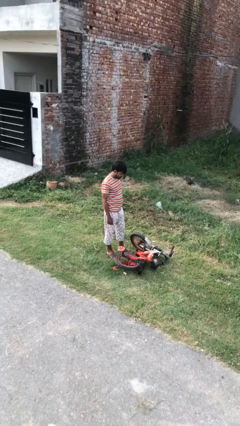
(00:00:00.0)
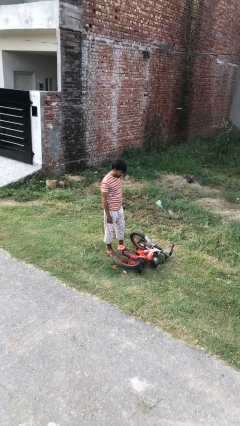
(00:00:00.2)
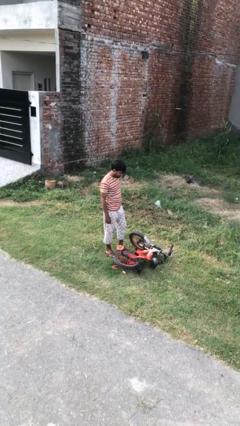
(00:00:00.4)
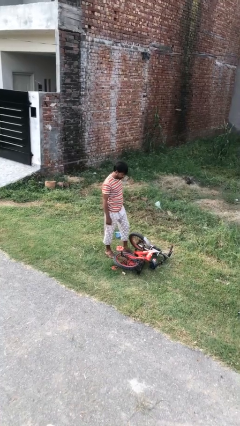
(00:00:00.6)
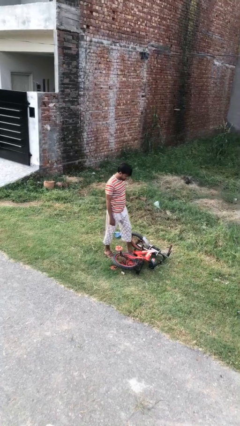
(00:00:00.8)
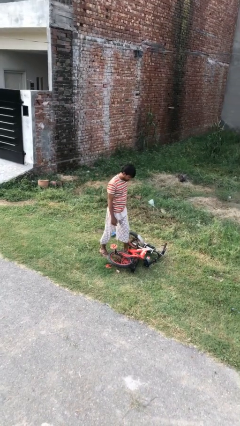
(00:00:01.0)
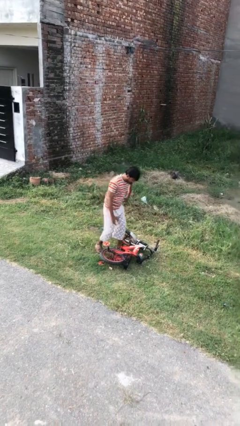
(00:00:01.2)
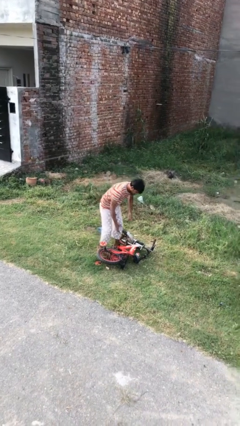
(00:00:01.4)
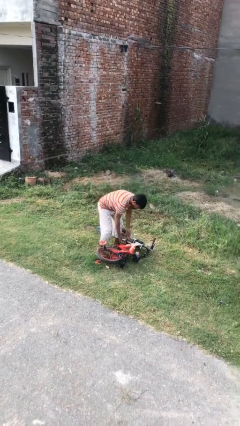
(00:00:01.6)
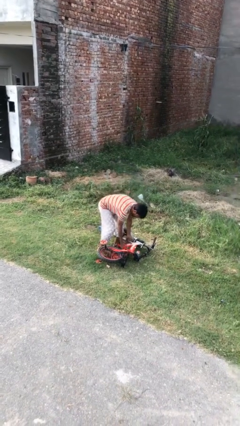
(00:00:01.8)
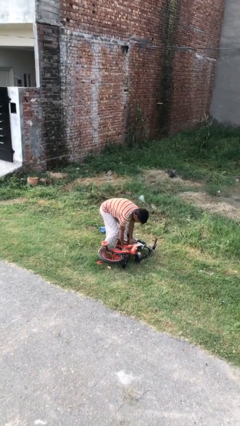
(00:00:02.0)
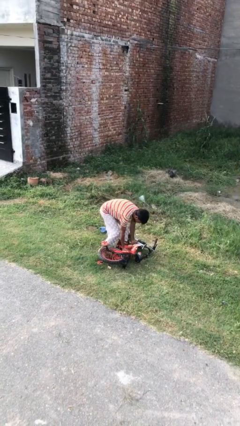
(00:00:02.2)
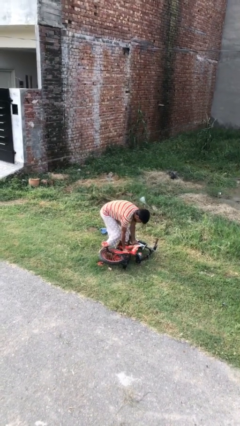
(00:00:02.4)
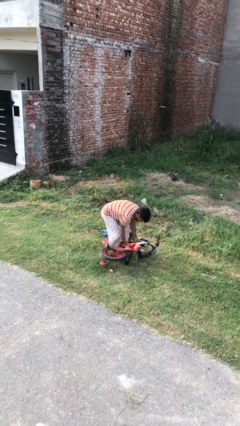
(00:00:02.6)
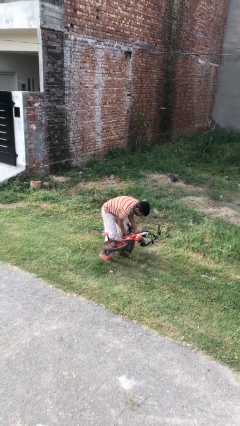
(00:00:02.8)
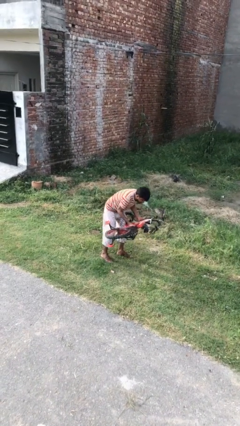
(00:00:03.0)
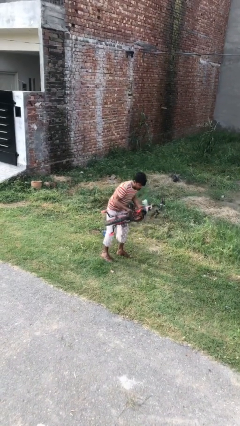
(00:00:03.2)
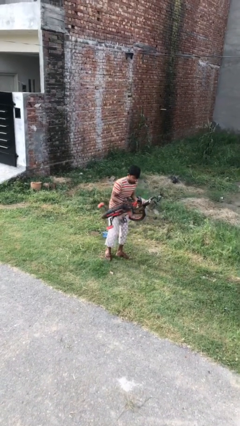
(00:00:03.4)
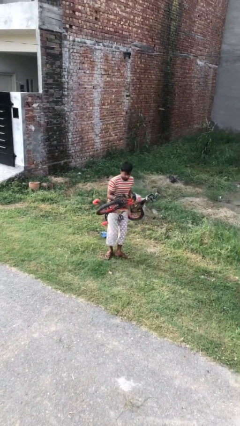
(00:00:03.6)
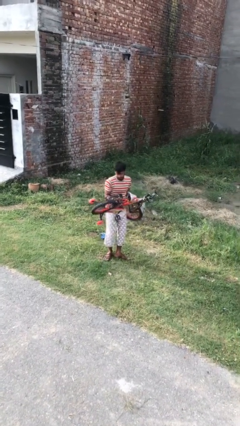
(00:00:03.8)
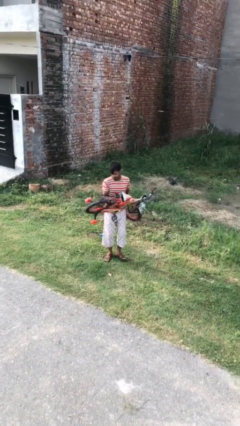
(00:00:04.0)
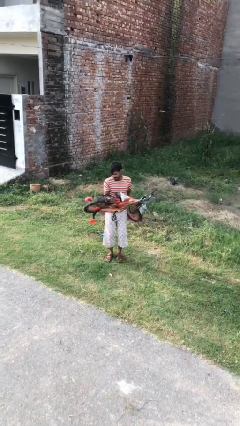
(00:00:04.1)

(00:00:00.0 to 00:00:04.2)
person picks up object from floor

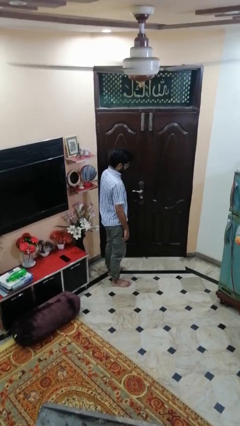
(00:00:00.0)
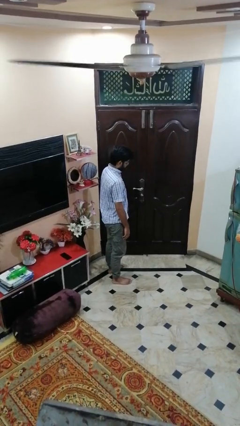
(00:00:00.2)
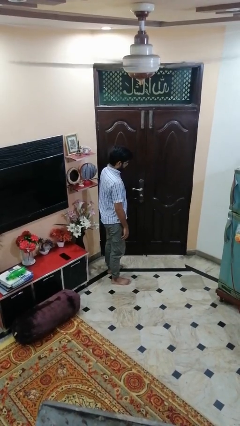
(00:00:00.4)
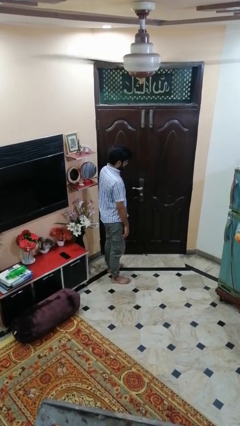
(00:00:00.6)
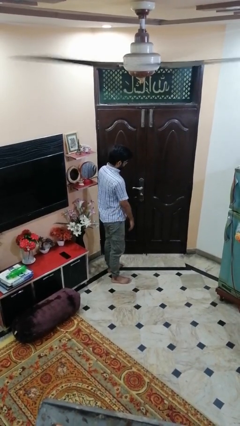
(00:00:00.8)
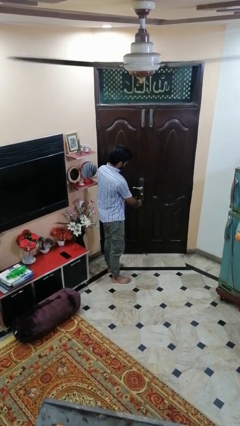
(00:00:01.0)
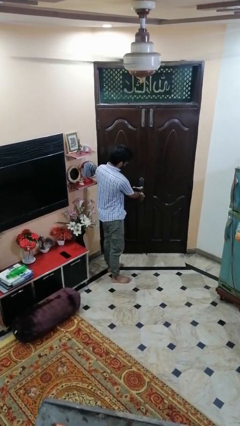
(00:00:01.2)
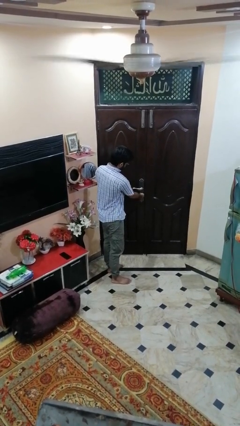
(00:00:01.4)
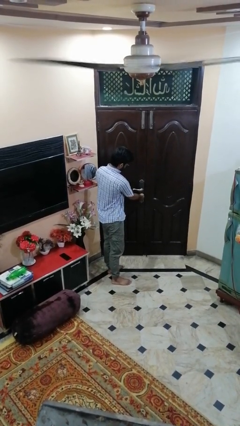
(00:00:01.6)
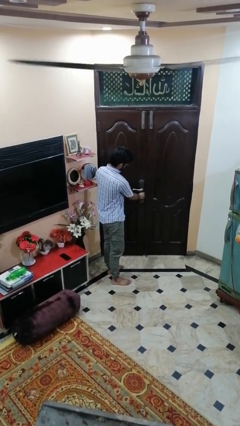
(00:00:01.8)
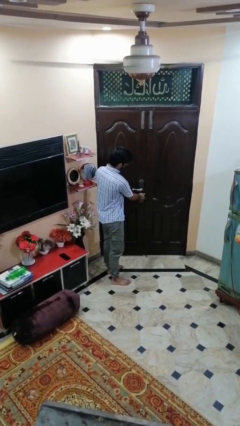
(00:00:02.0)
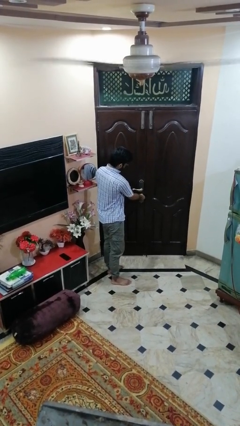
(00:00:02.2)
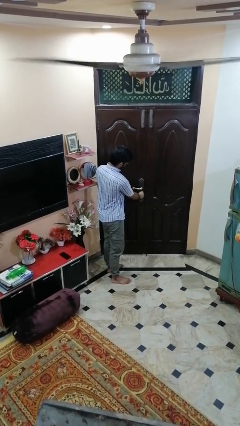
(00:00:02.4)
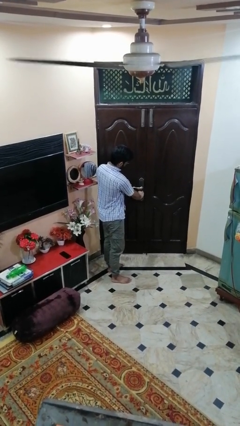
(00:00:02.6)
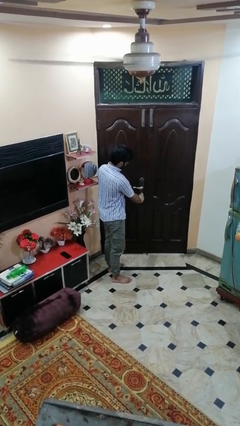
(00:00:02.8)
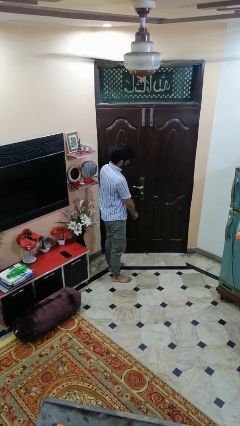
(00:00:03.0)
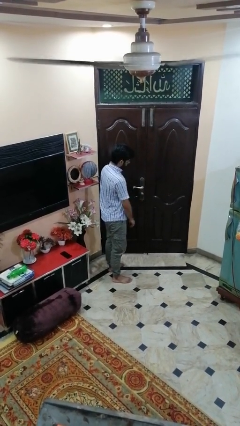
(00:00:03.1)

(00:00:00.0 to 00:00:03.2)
person unlocks door with keys

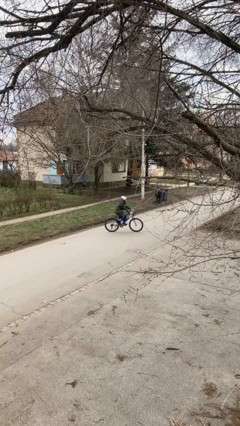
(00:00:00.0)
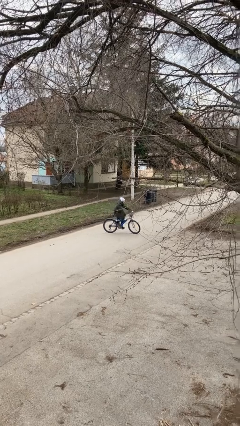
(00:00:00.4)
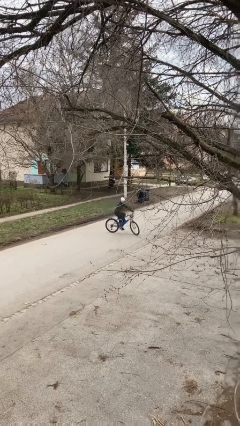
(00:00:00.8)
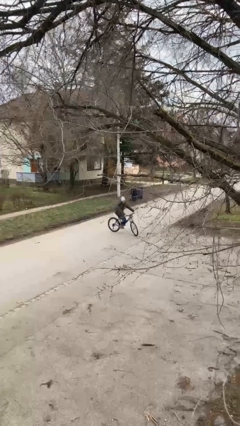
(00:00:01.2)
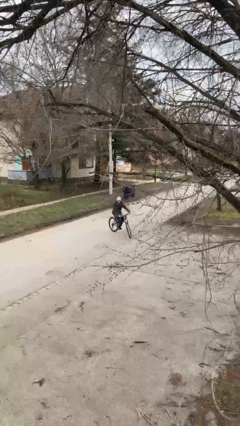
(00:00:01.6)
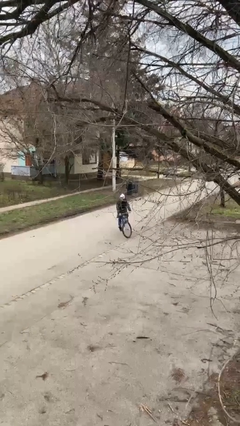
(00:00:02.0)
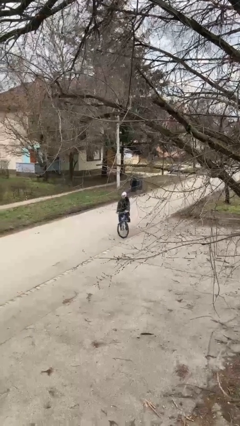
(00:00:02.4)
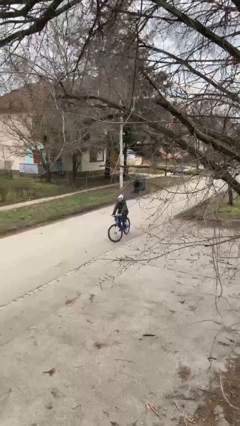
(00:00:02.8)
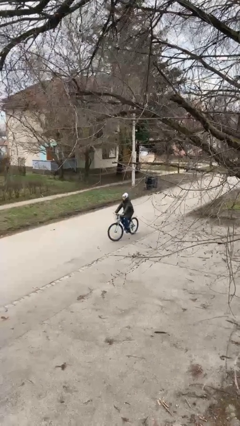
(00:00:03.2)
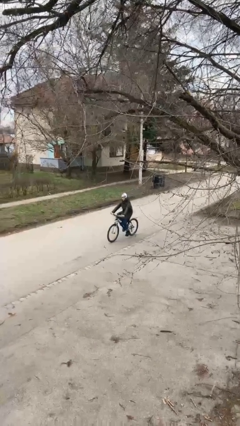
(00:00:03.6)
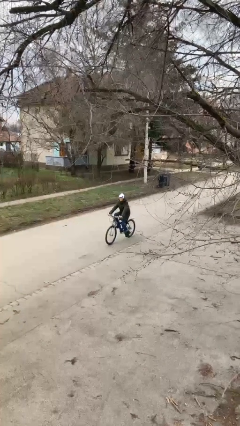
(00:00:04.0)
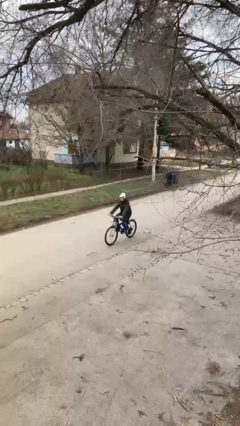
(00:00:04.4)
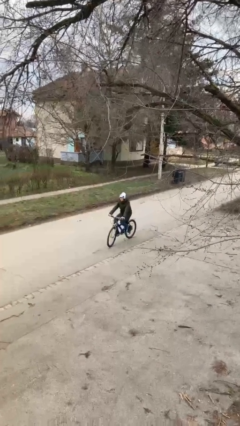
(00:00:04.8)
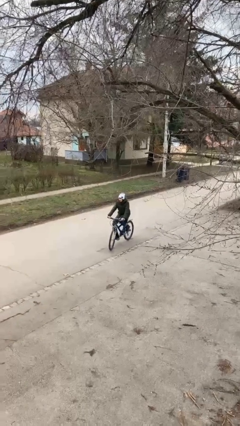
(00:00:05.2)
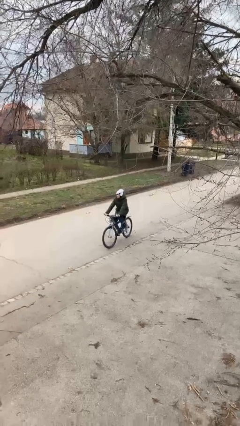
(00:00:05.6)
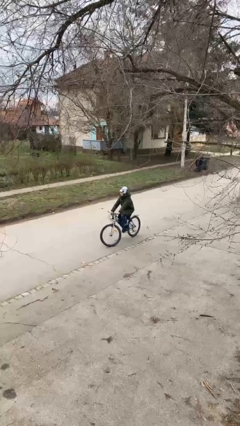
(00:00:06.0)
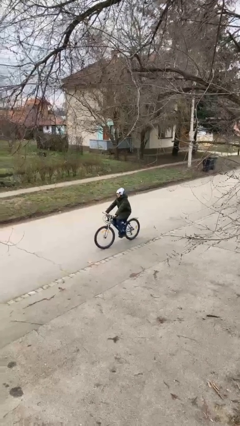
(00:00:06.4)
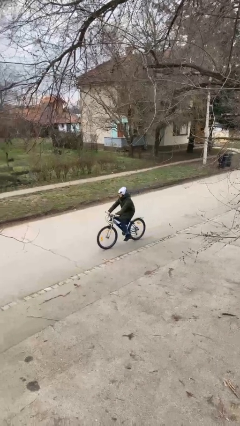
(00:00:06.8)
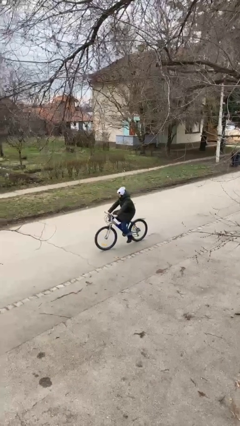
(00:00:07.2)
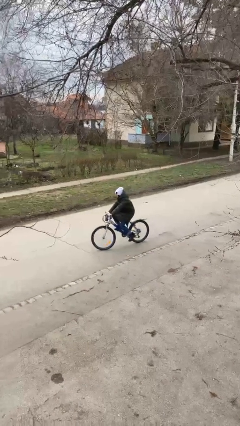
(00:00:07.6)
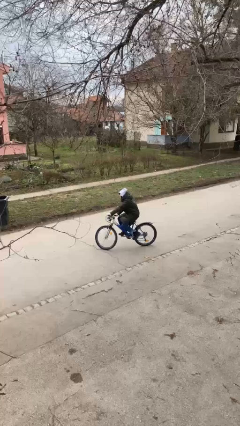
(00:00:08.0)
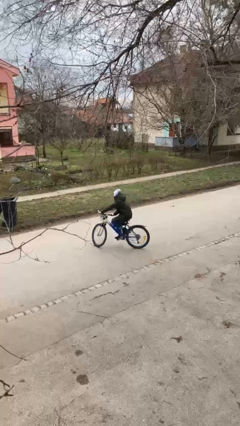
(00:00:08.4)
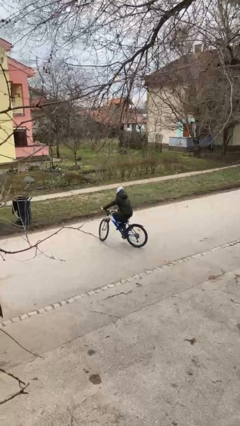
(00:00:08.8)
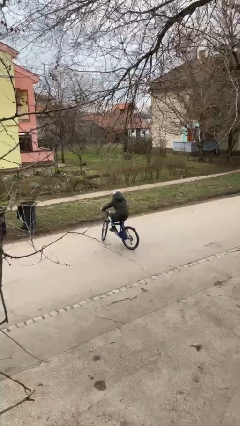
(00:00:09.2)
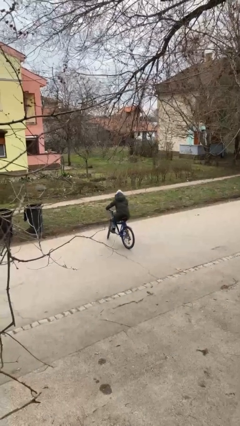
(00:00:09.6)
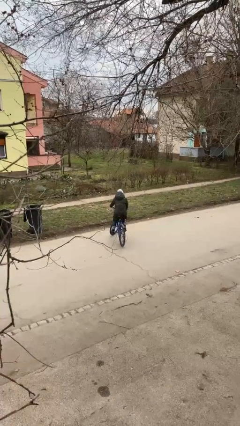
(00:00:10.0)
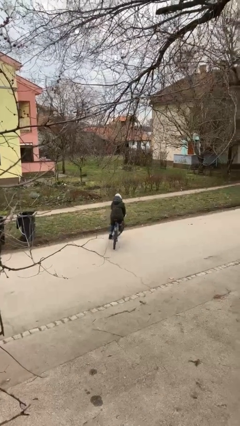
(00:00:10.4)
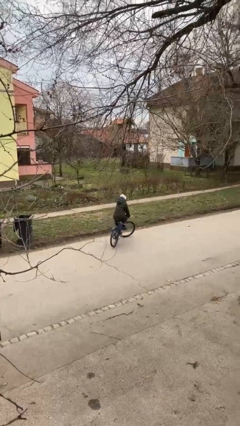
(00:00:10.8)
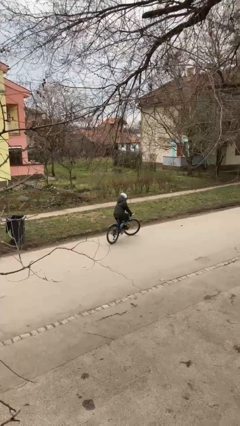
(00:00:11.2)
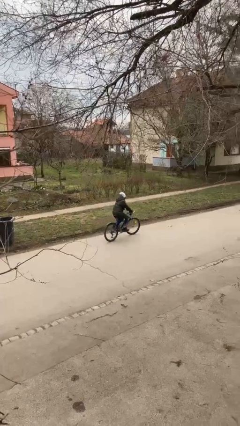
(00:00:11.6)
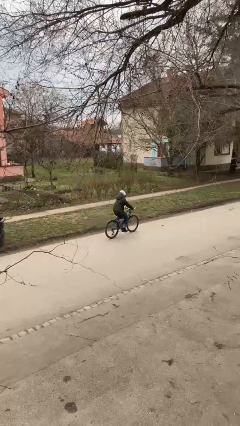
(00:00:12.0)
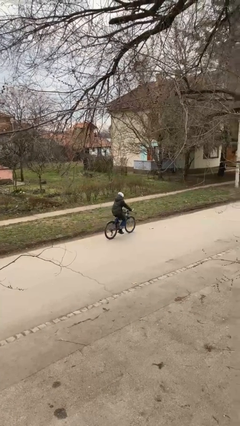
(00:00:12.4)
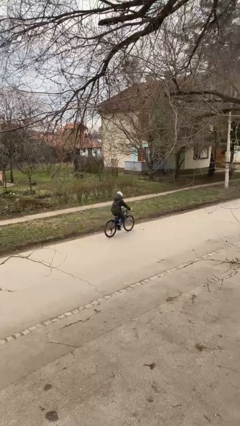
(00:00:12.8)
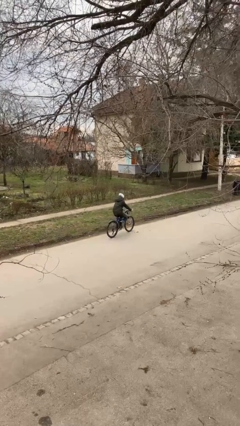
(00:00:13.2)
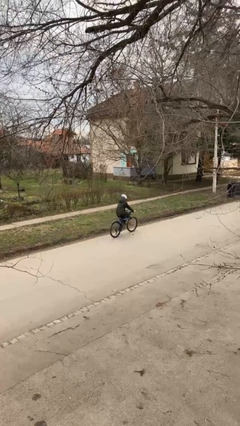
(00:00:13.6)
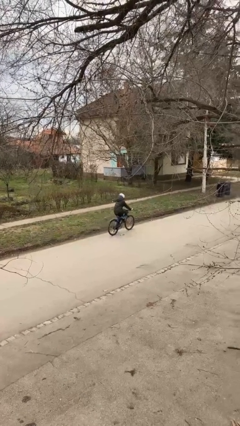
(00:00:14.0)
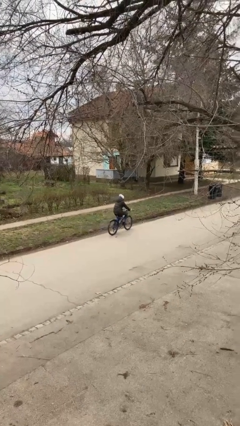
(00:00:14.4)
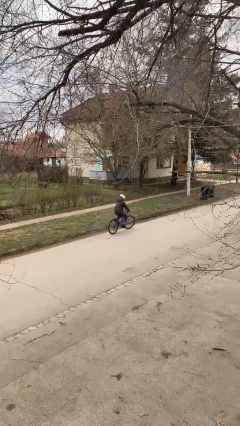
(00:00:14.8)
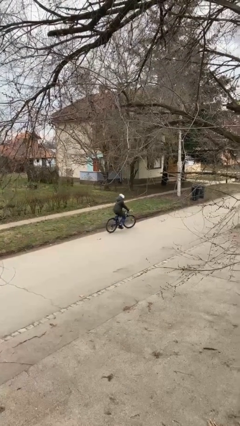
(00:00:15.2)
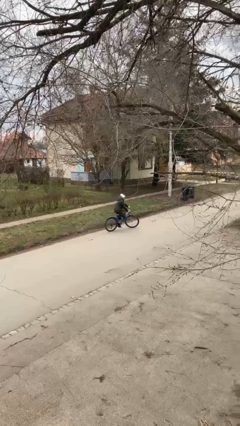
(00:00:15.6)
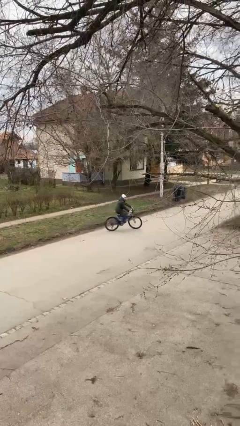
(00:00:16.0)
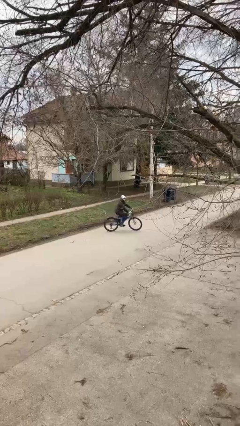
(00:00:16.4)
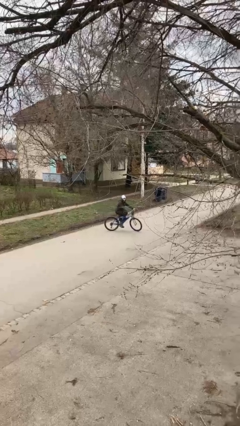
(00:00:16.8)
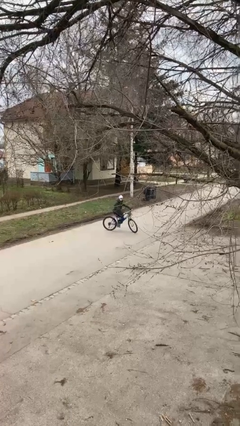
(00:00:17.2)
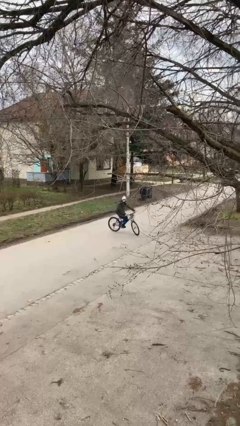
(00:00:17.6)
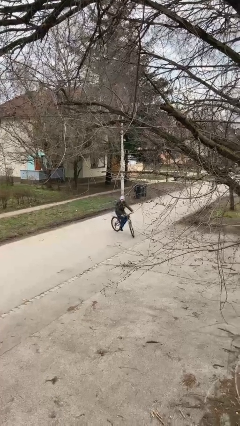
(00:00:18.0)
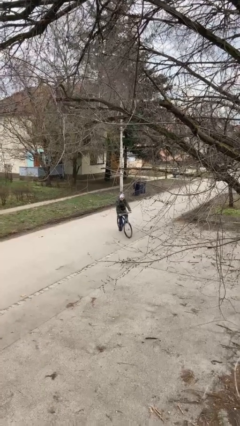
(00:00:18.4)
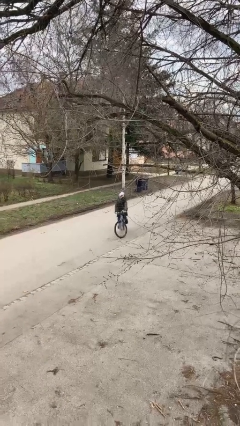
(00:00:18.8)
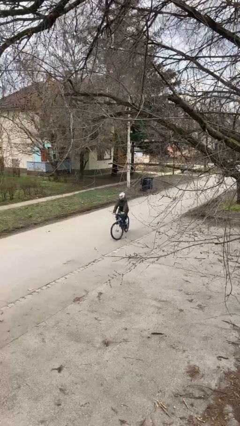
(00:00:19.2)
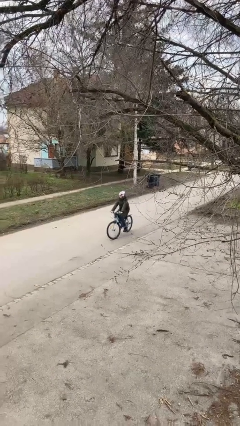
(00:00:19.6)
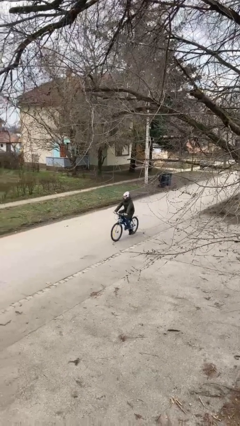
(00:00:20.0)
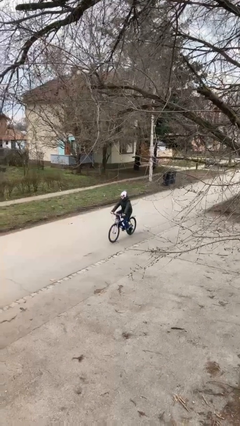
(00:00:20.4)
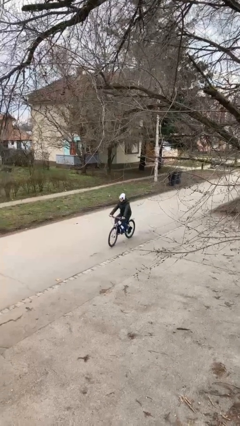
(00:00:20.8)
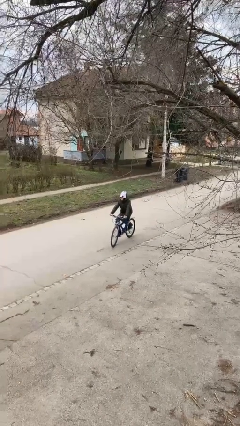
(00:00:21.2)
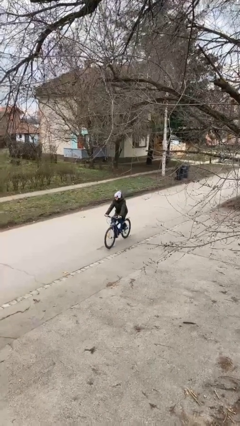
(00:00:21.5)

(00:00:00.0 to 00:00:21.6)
person rides bicycle
